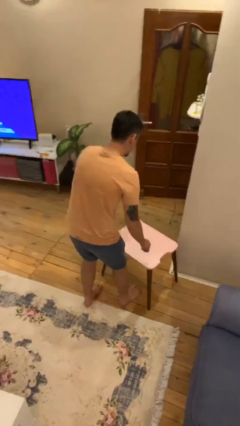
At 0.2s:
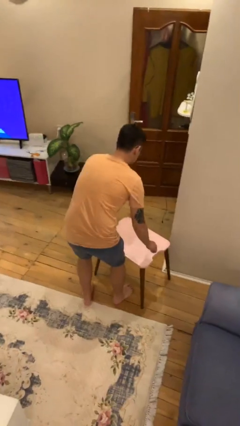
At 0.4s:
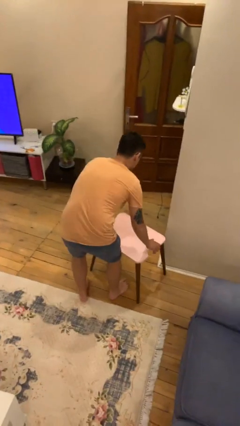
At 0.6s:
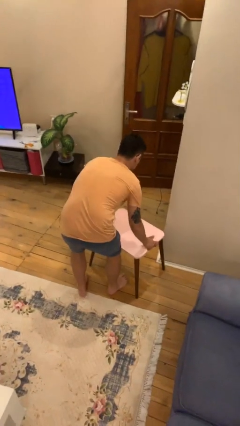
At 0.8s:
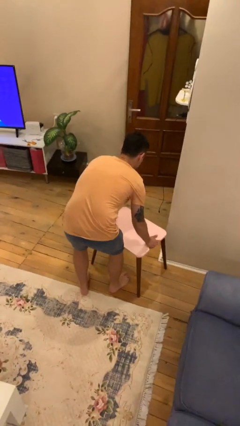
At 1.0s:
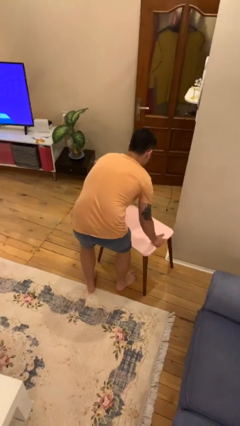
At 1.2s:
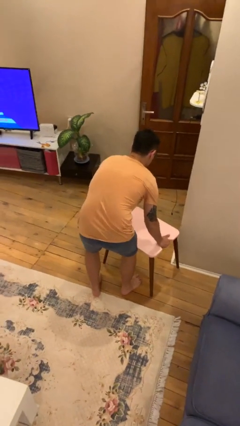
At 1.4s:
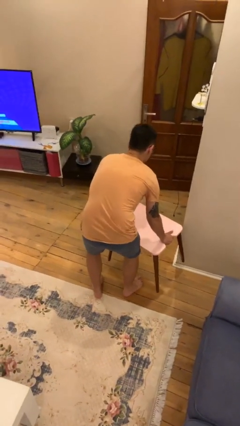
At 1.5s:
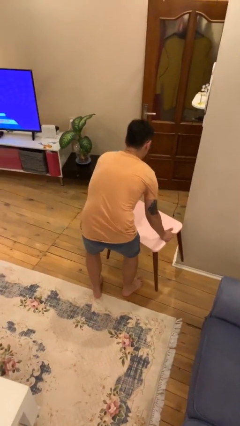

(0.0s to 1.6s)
person picks up object from floor

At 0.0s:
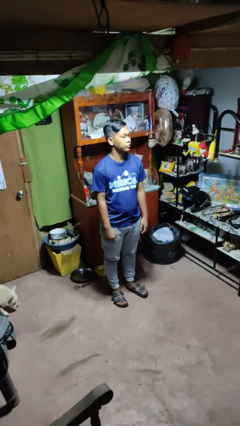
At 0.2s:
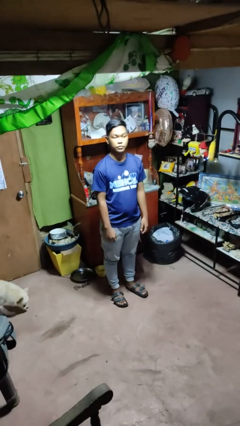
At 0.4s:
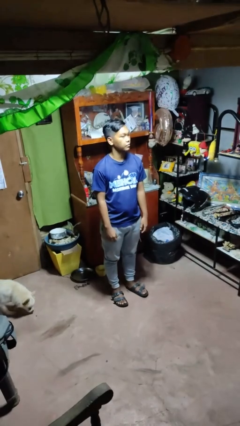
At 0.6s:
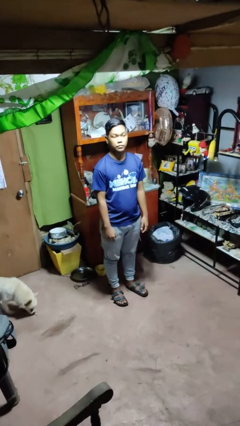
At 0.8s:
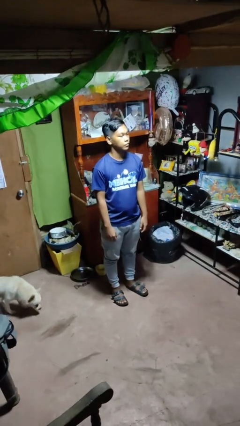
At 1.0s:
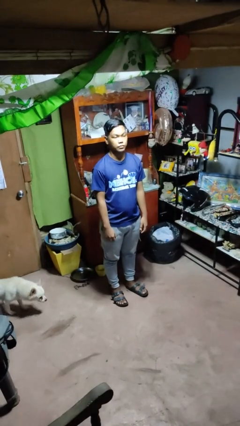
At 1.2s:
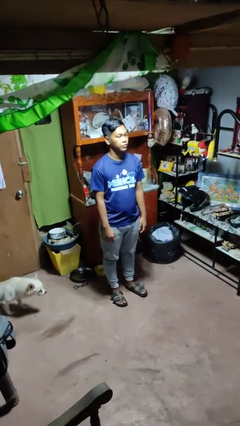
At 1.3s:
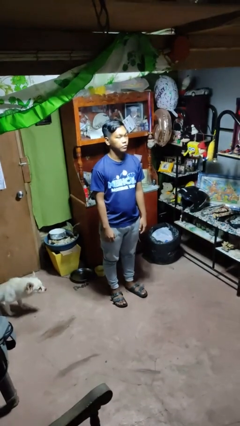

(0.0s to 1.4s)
person shakes head

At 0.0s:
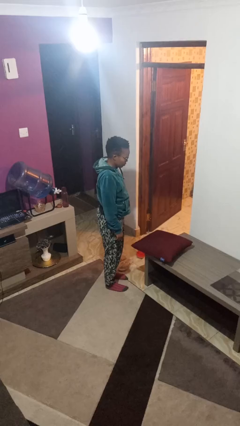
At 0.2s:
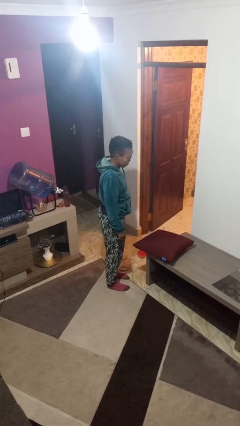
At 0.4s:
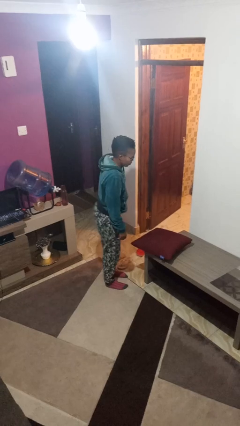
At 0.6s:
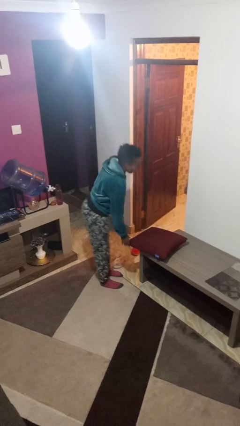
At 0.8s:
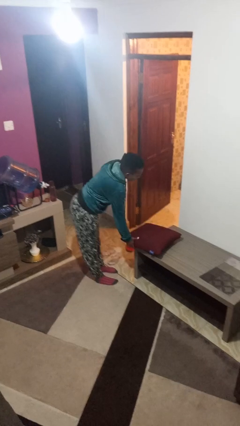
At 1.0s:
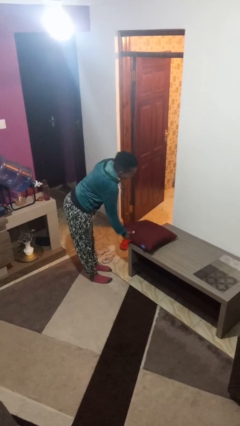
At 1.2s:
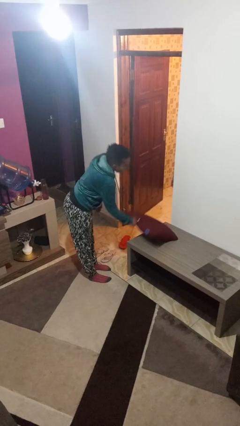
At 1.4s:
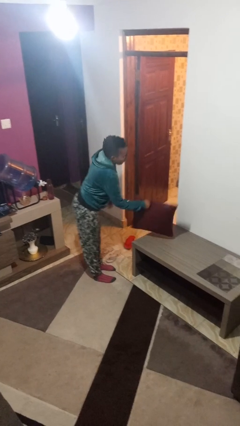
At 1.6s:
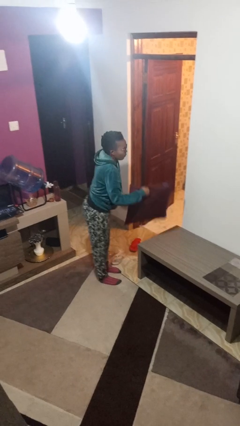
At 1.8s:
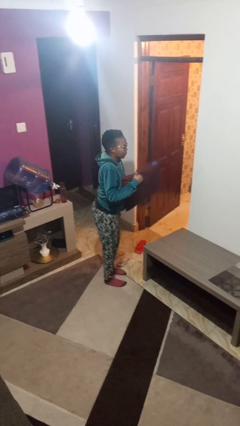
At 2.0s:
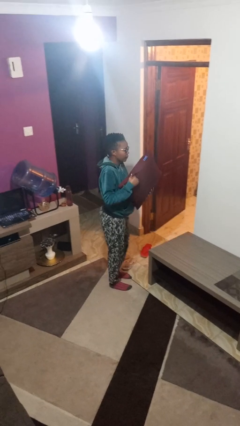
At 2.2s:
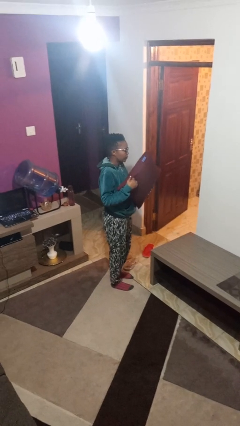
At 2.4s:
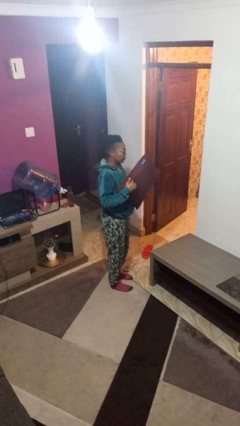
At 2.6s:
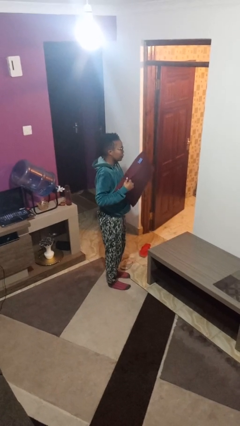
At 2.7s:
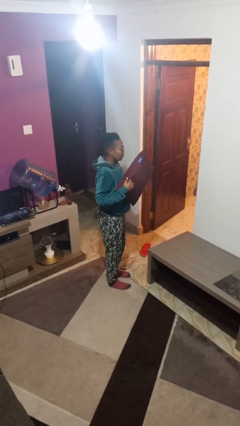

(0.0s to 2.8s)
person picks up object from table

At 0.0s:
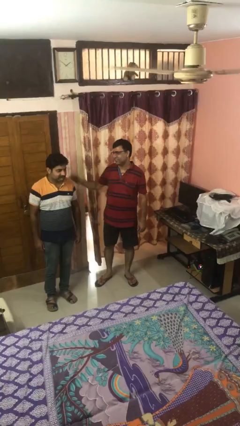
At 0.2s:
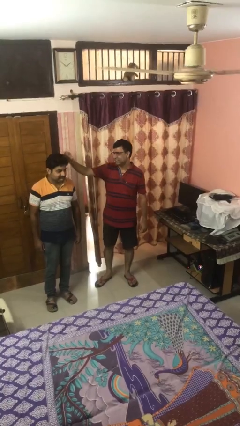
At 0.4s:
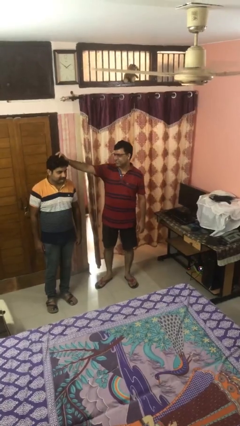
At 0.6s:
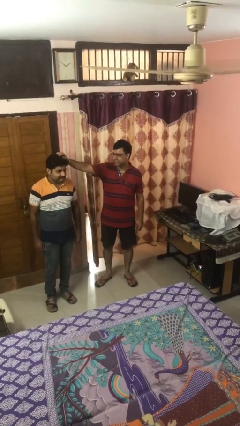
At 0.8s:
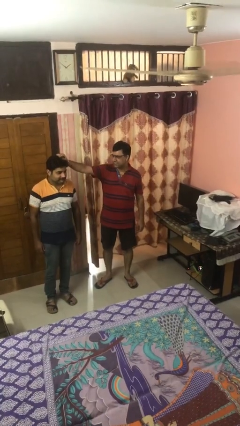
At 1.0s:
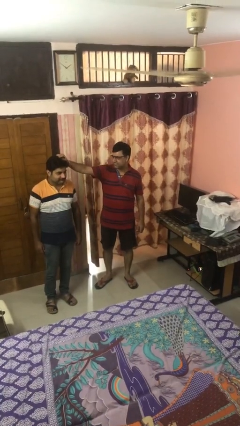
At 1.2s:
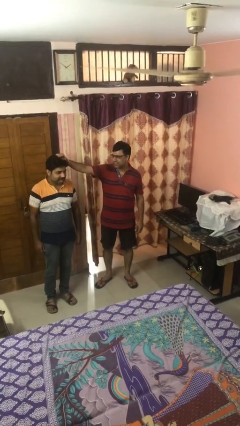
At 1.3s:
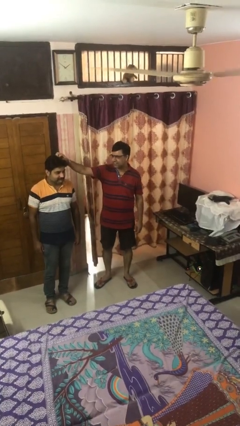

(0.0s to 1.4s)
person grabs person by hair

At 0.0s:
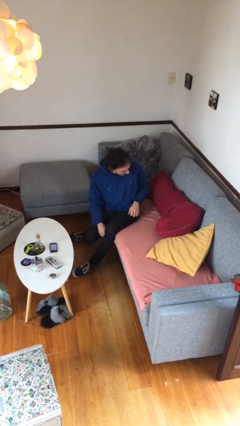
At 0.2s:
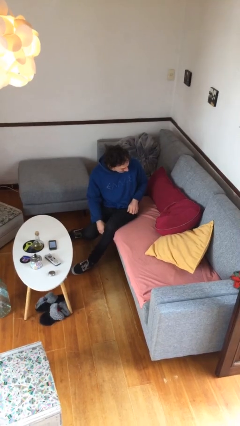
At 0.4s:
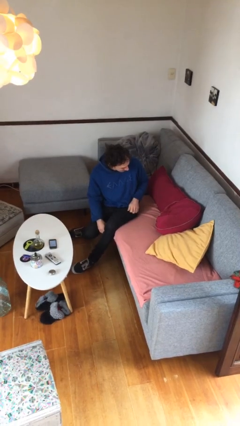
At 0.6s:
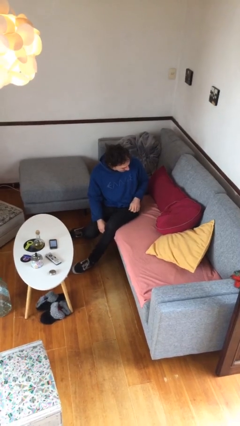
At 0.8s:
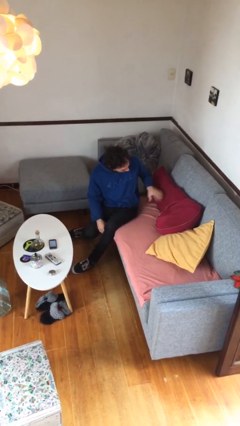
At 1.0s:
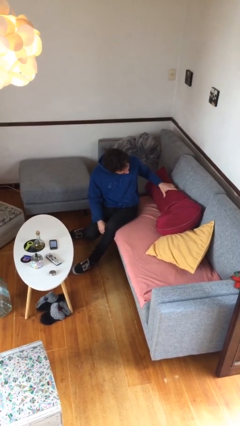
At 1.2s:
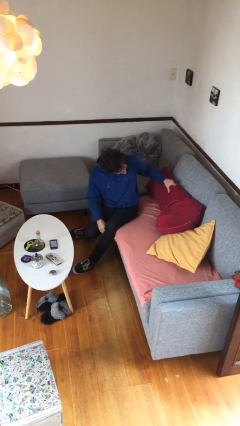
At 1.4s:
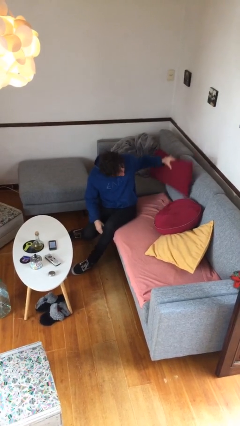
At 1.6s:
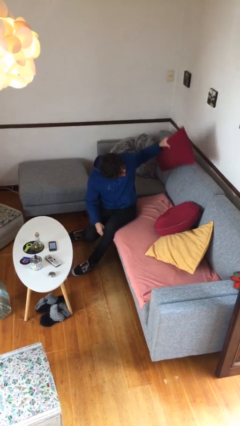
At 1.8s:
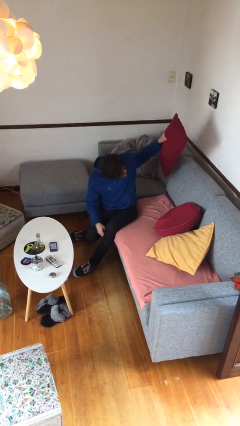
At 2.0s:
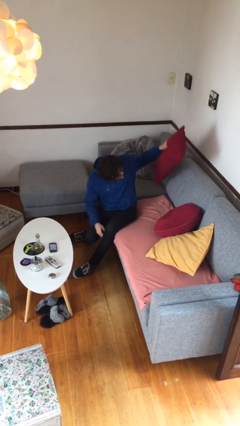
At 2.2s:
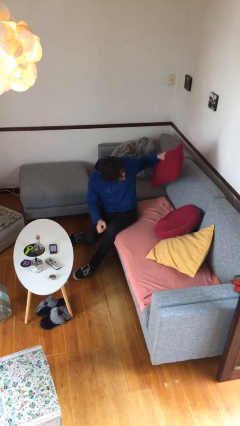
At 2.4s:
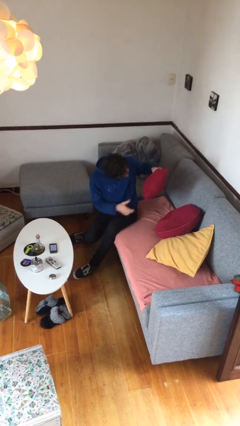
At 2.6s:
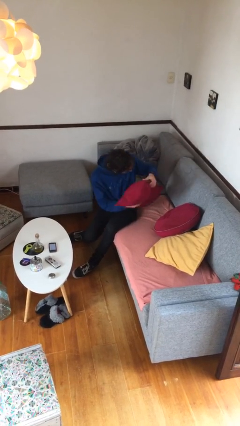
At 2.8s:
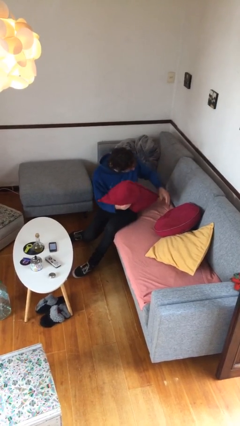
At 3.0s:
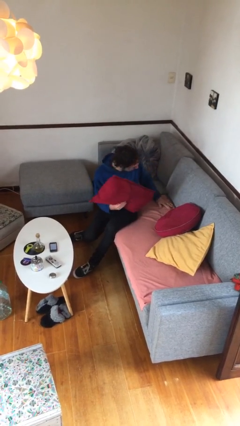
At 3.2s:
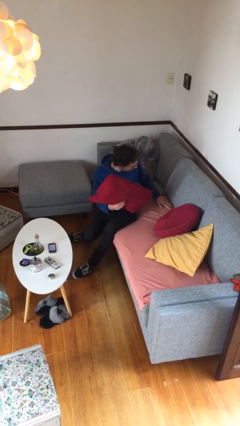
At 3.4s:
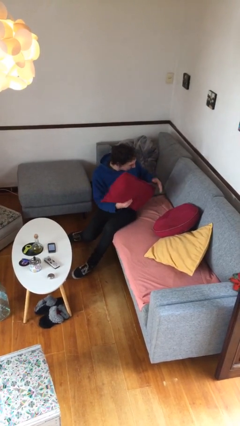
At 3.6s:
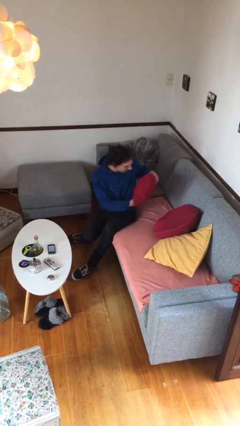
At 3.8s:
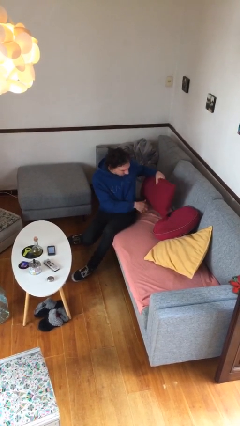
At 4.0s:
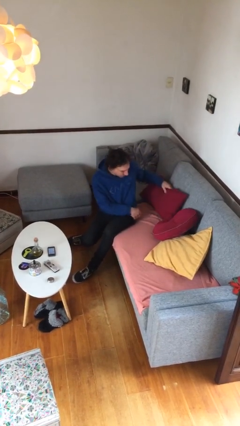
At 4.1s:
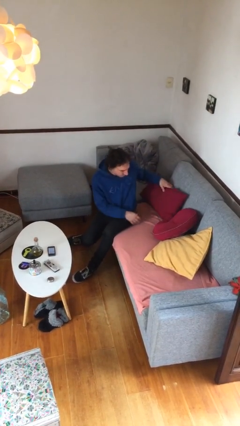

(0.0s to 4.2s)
person searches in couch

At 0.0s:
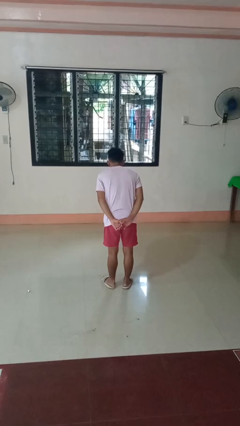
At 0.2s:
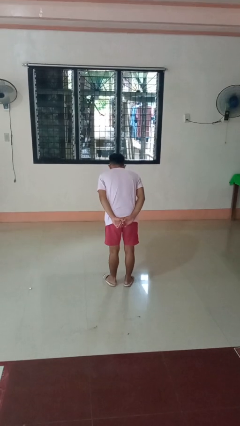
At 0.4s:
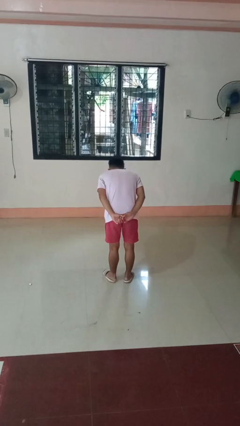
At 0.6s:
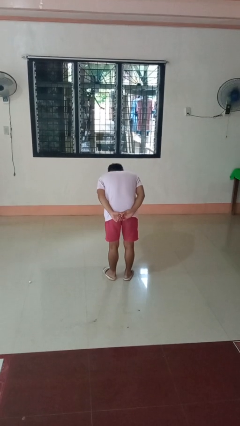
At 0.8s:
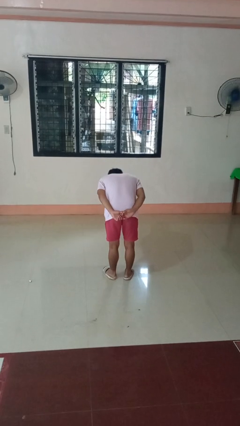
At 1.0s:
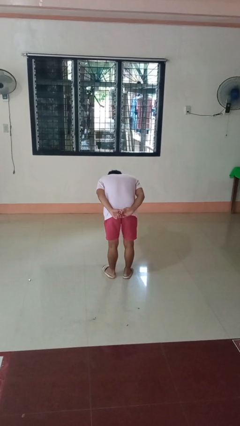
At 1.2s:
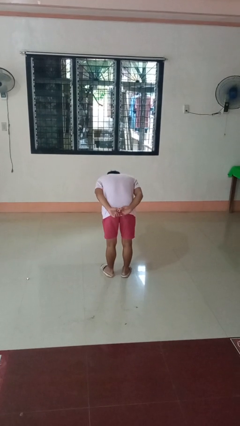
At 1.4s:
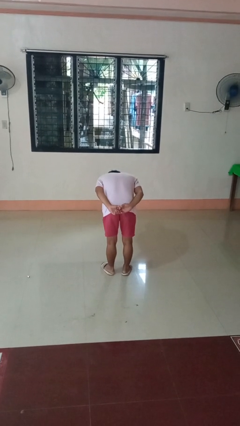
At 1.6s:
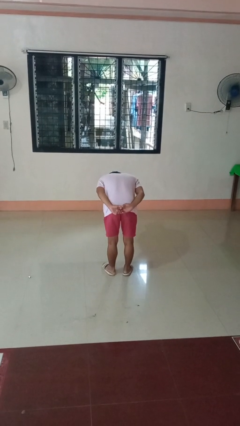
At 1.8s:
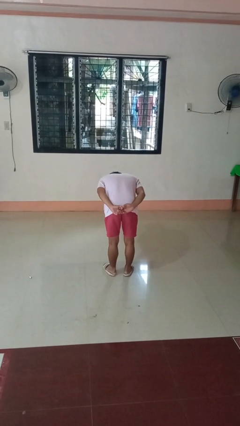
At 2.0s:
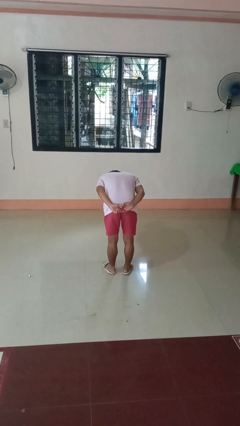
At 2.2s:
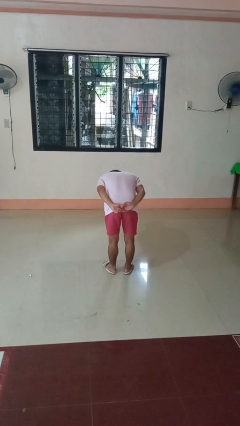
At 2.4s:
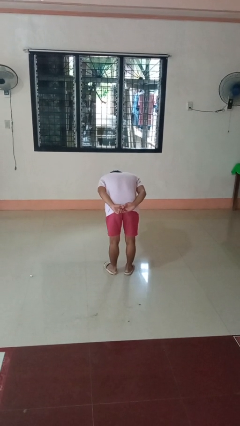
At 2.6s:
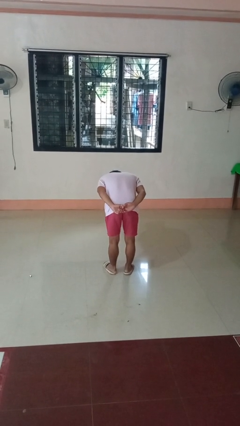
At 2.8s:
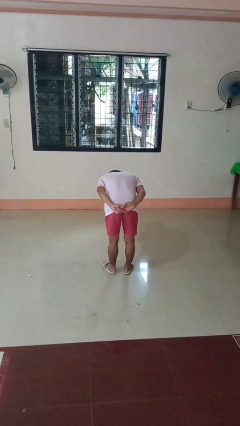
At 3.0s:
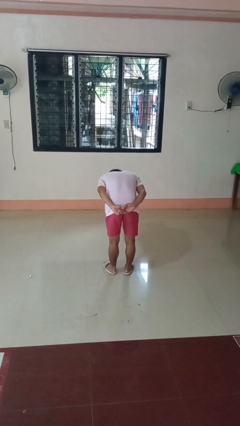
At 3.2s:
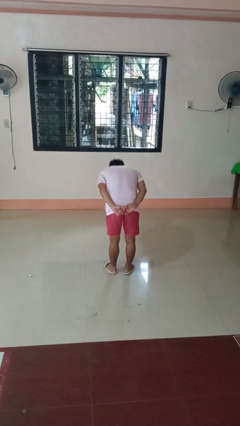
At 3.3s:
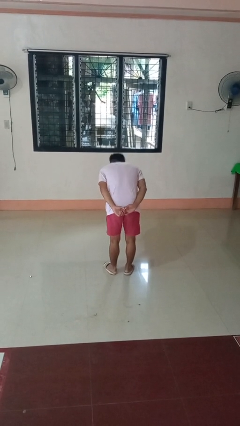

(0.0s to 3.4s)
person bows

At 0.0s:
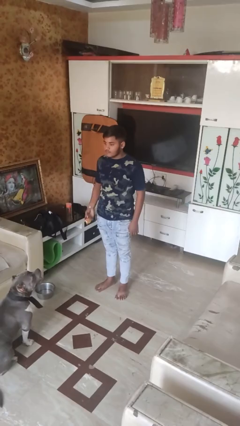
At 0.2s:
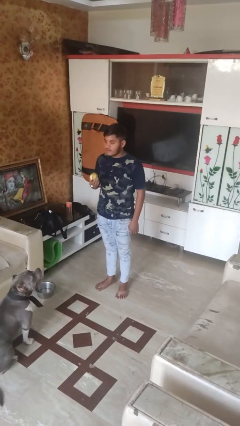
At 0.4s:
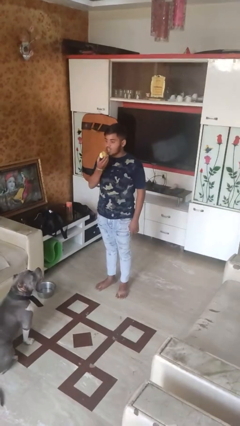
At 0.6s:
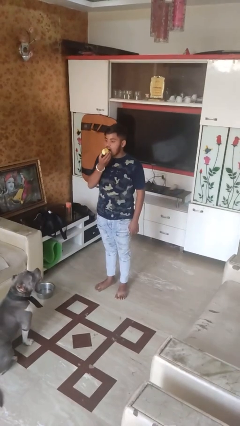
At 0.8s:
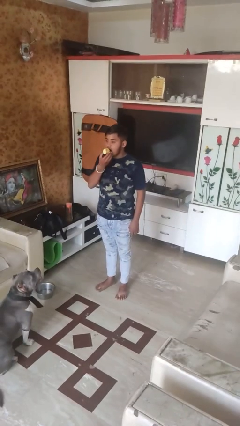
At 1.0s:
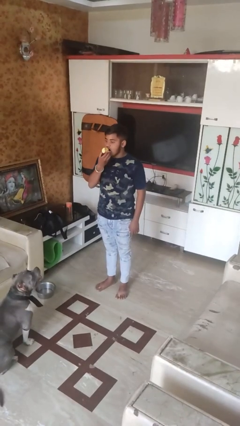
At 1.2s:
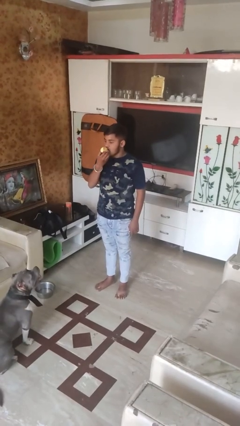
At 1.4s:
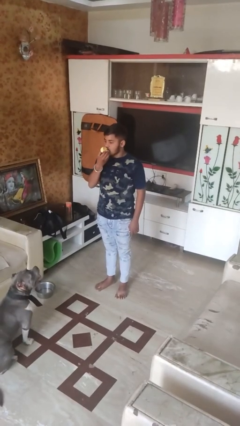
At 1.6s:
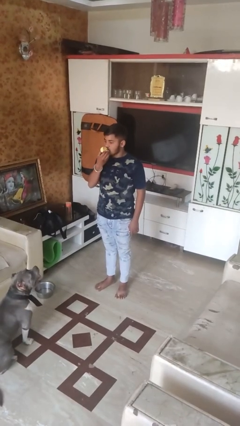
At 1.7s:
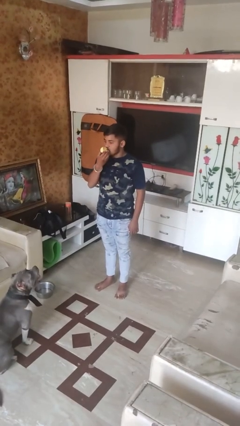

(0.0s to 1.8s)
person eats apple

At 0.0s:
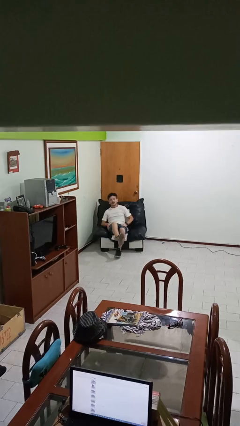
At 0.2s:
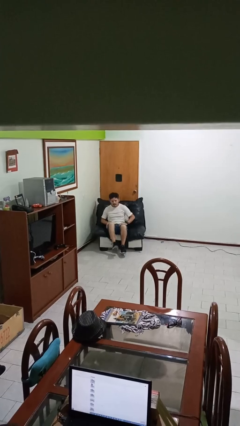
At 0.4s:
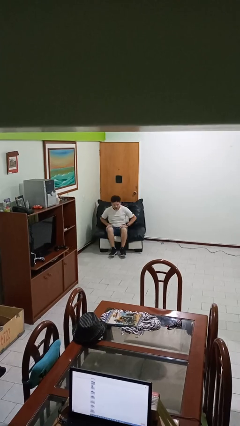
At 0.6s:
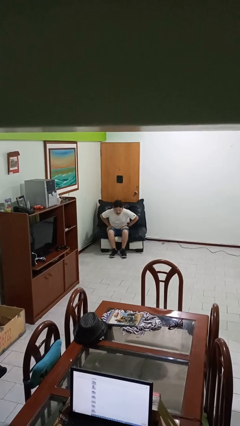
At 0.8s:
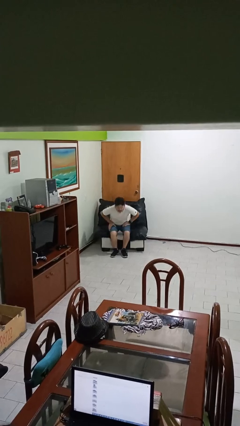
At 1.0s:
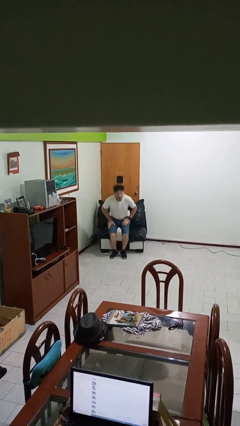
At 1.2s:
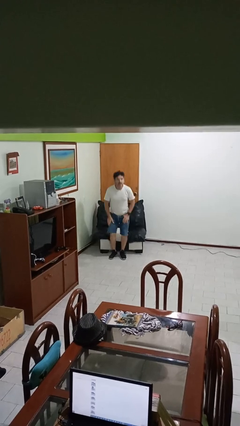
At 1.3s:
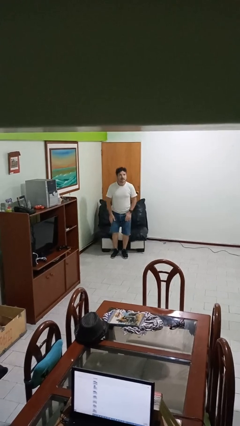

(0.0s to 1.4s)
person stands up
